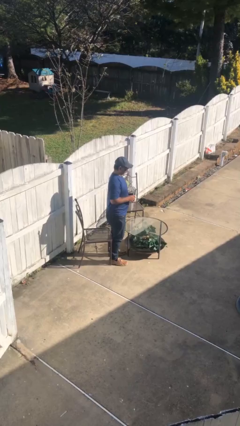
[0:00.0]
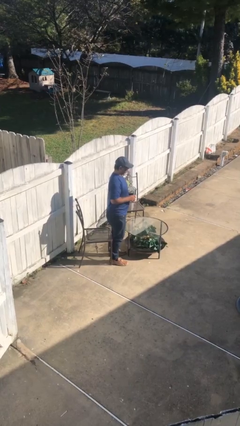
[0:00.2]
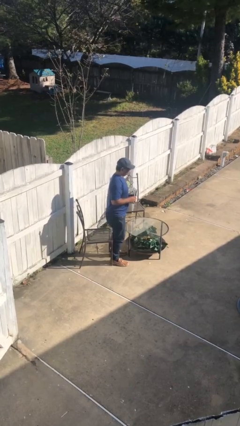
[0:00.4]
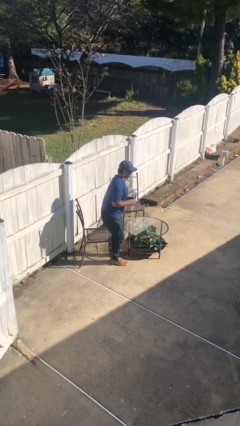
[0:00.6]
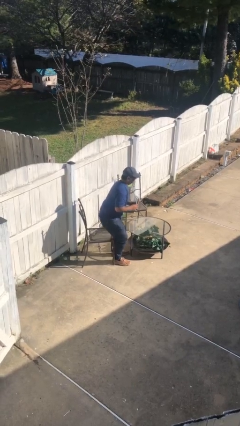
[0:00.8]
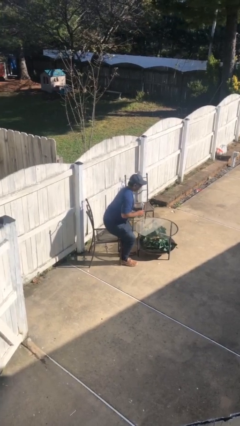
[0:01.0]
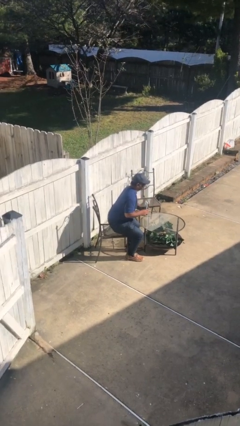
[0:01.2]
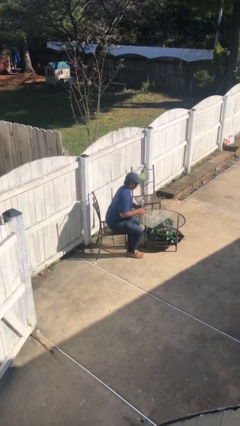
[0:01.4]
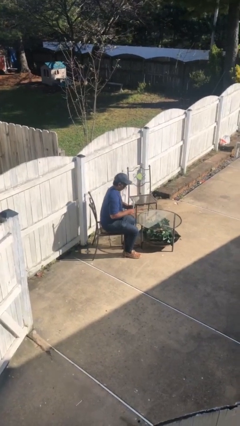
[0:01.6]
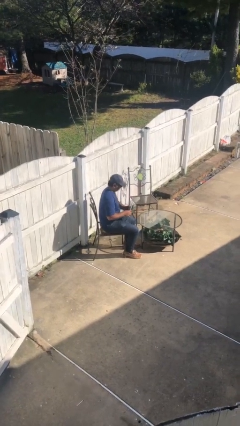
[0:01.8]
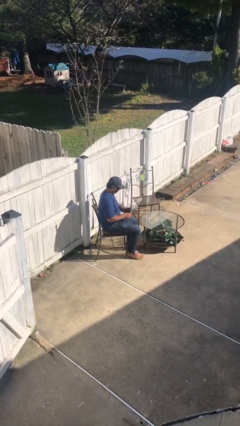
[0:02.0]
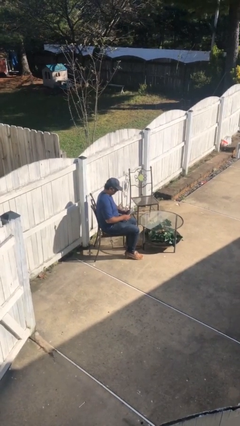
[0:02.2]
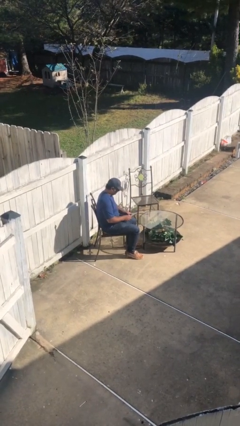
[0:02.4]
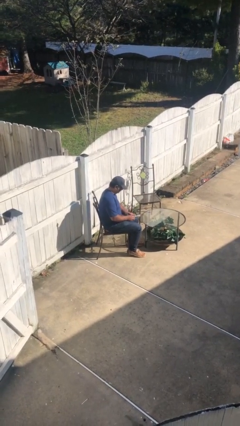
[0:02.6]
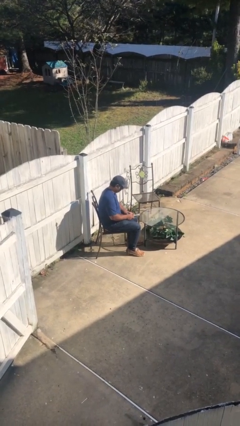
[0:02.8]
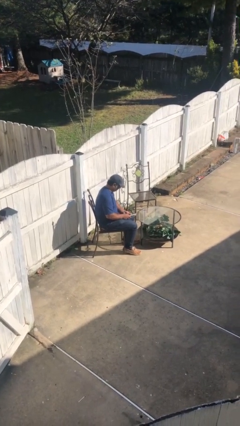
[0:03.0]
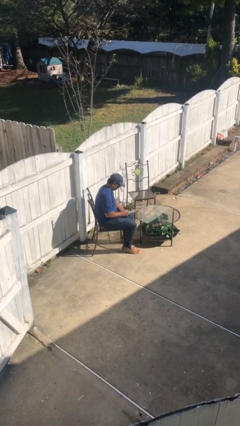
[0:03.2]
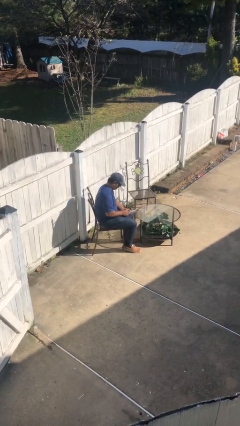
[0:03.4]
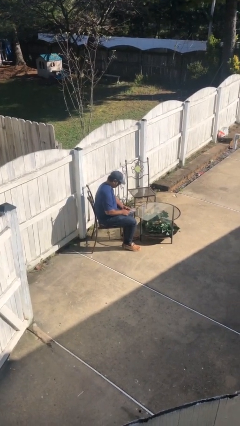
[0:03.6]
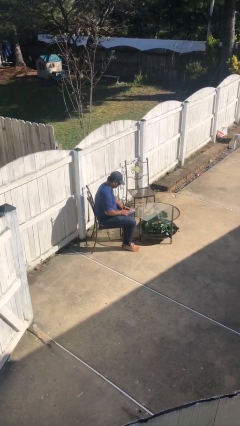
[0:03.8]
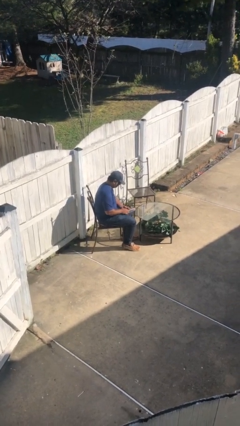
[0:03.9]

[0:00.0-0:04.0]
person sits down

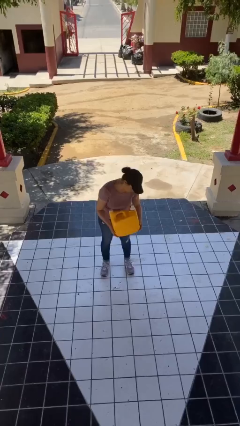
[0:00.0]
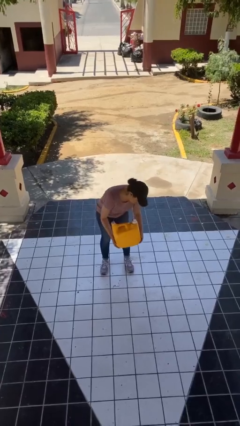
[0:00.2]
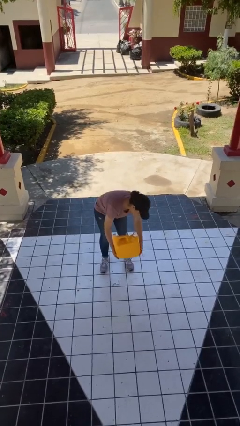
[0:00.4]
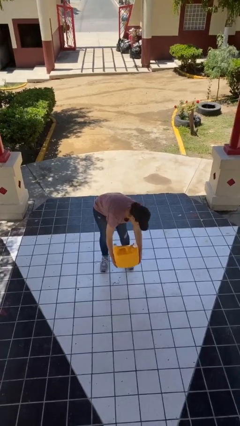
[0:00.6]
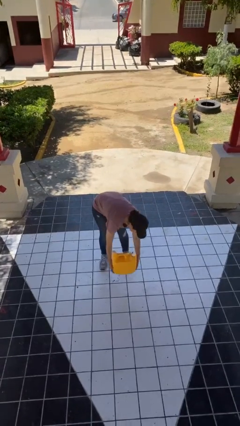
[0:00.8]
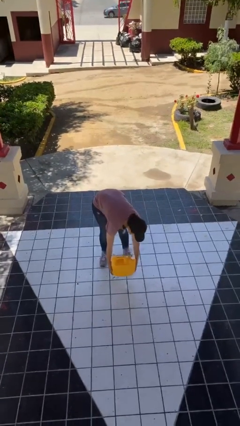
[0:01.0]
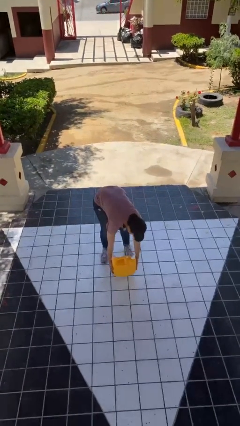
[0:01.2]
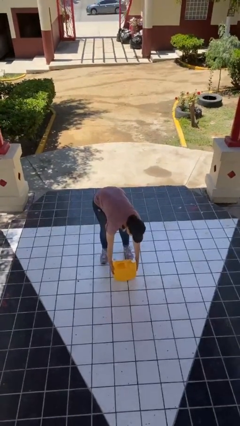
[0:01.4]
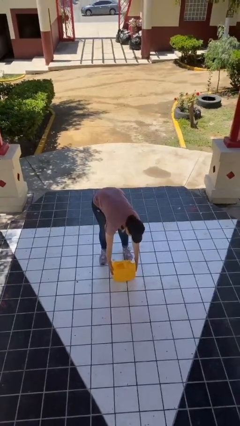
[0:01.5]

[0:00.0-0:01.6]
person puts down object on floor

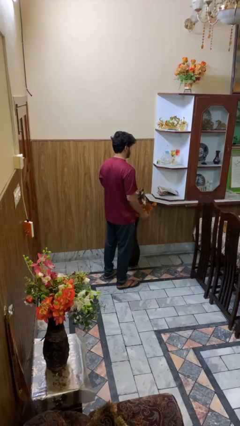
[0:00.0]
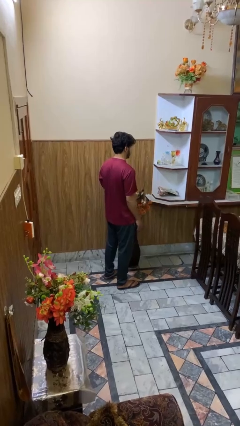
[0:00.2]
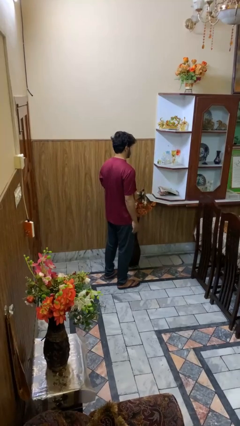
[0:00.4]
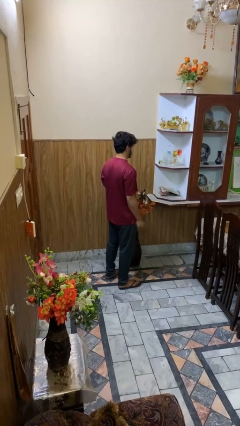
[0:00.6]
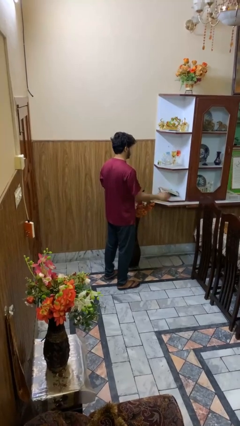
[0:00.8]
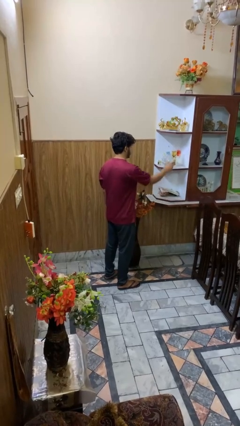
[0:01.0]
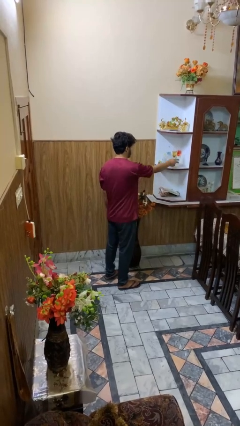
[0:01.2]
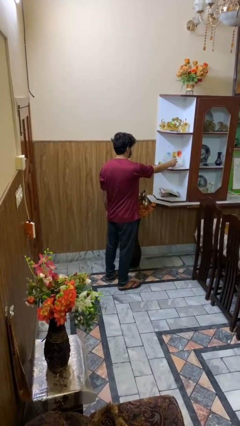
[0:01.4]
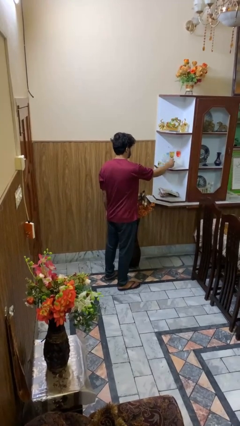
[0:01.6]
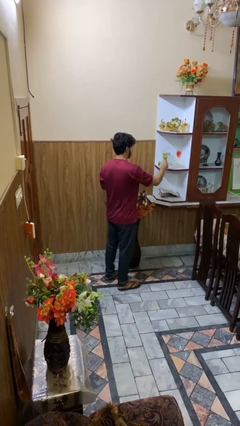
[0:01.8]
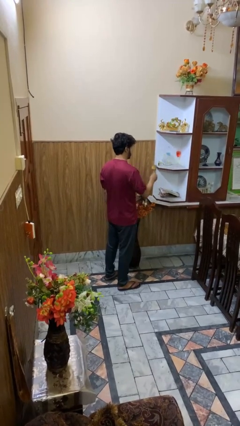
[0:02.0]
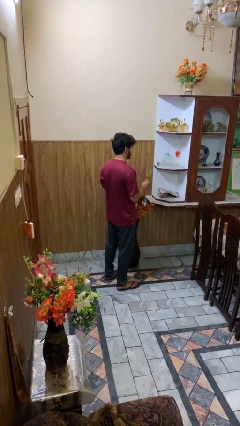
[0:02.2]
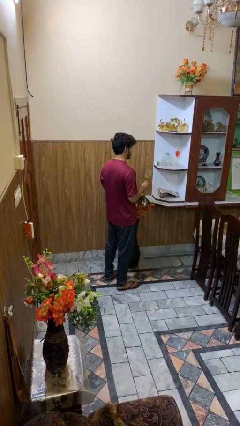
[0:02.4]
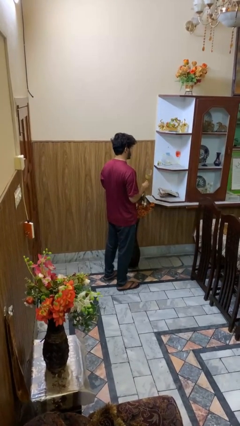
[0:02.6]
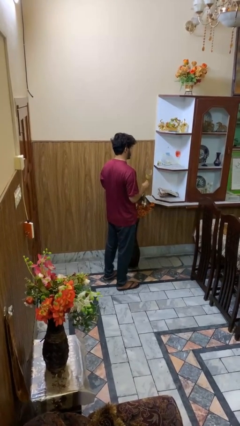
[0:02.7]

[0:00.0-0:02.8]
person picks up object from cabinet

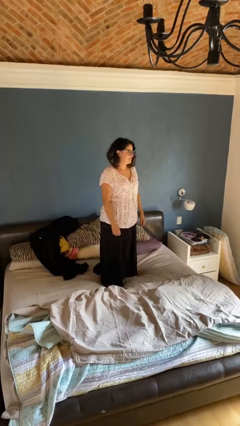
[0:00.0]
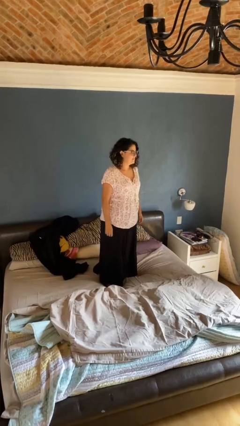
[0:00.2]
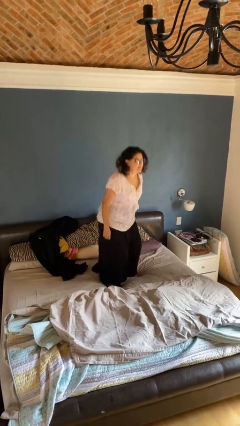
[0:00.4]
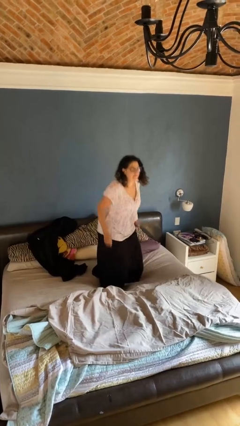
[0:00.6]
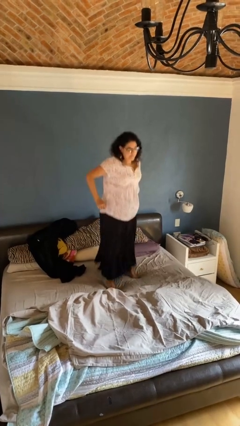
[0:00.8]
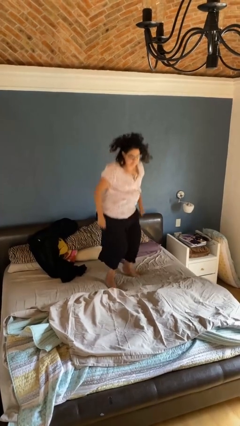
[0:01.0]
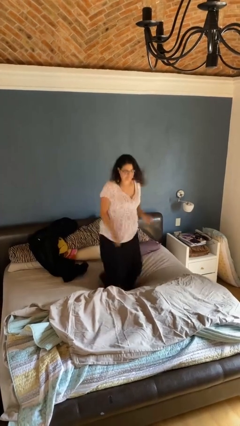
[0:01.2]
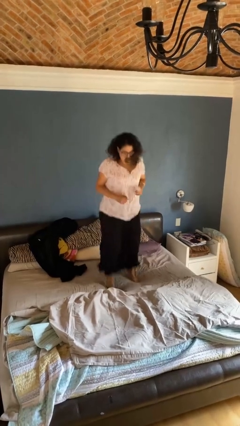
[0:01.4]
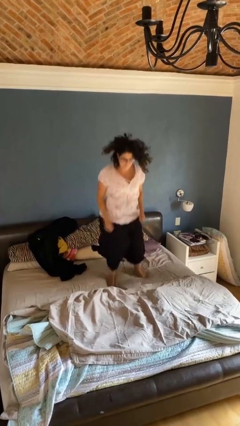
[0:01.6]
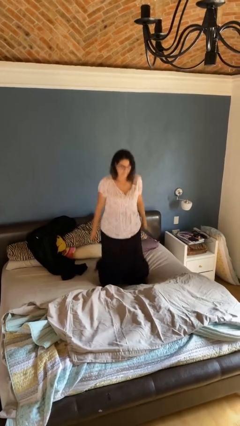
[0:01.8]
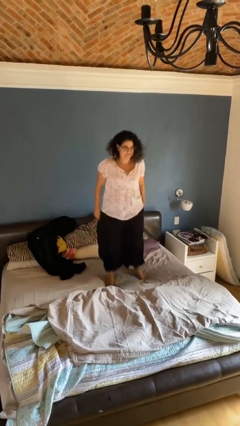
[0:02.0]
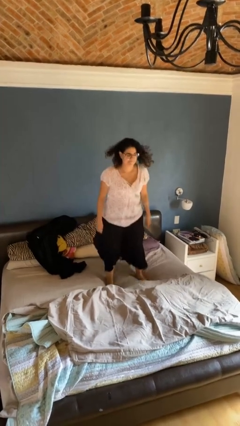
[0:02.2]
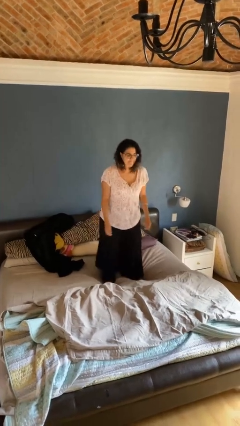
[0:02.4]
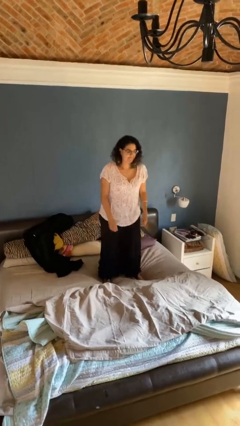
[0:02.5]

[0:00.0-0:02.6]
person jumps on bed

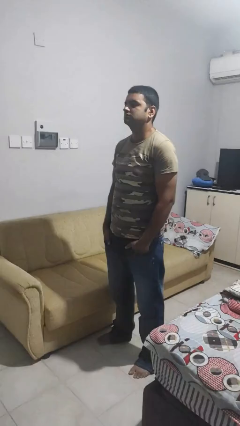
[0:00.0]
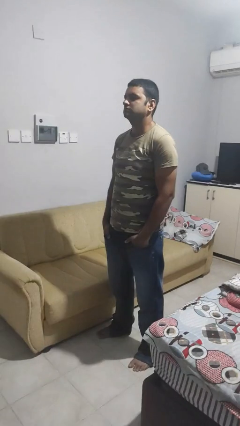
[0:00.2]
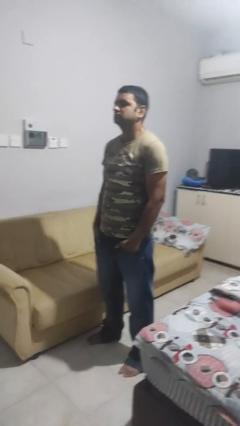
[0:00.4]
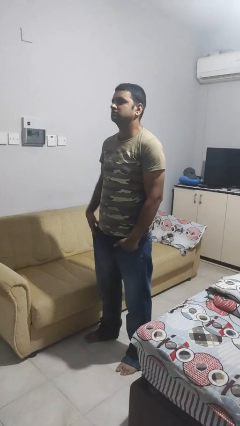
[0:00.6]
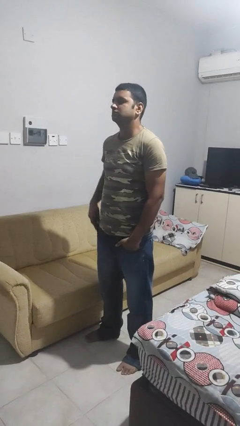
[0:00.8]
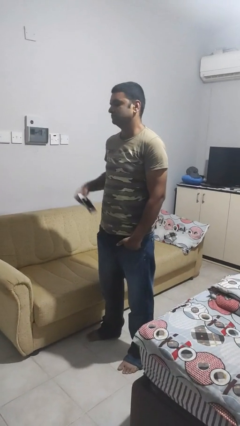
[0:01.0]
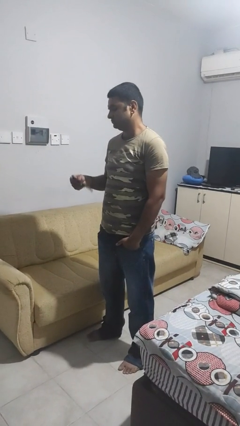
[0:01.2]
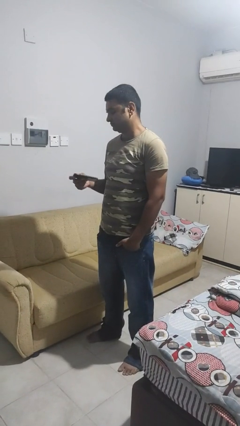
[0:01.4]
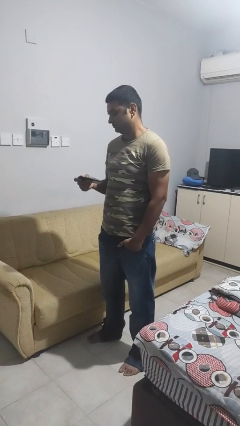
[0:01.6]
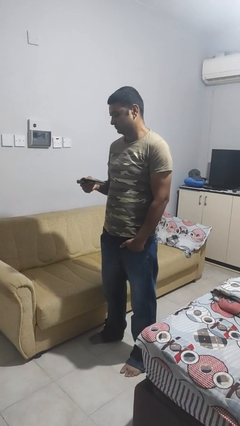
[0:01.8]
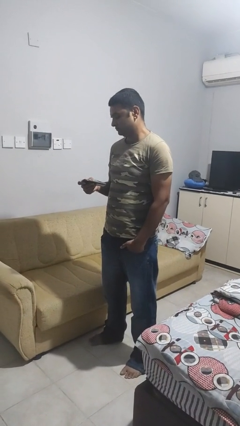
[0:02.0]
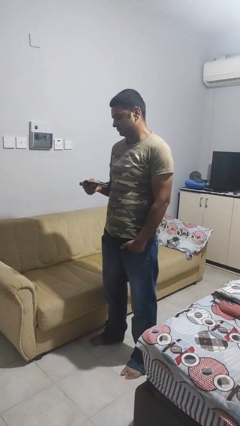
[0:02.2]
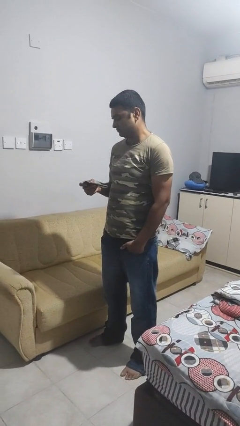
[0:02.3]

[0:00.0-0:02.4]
person takes phone from pocket

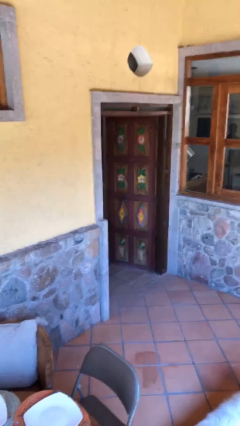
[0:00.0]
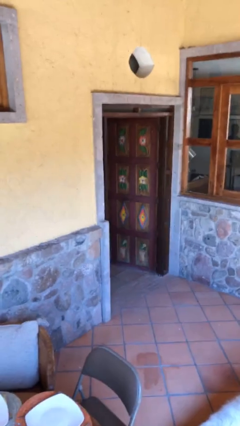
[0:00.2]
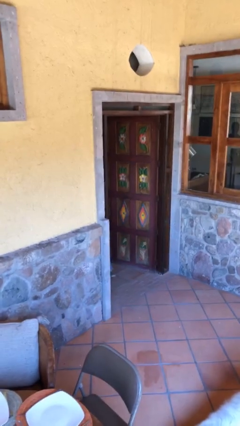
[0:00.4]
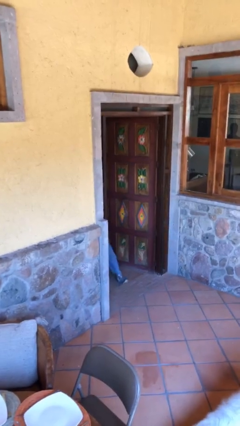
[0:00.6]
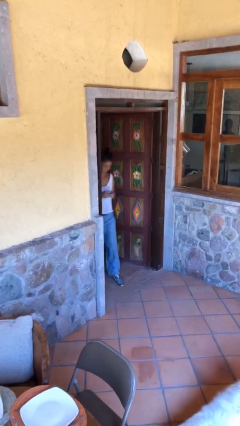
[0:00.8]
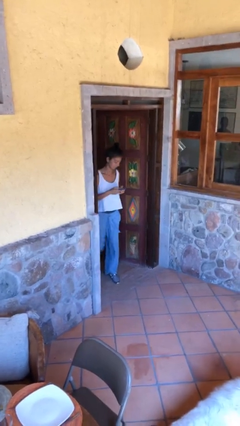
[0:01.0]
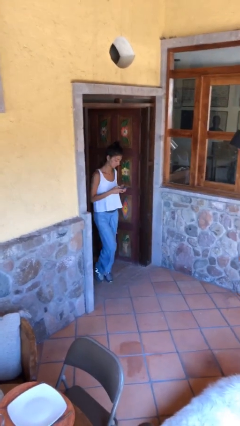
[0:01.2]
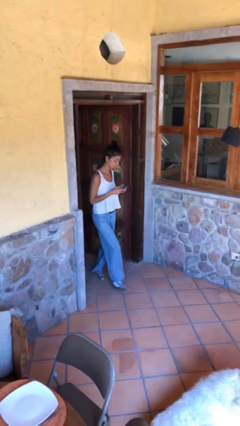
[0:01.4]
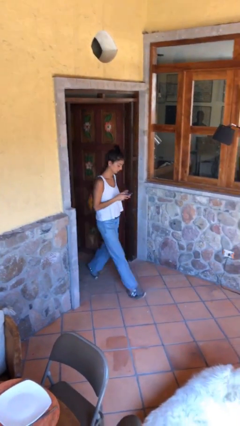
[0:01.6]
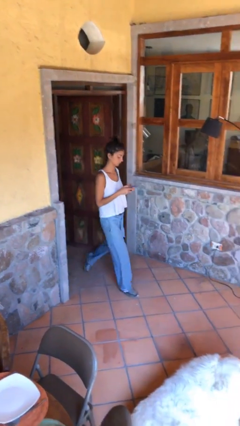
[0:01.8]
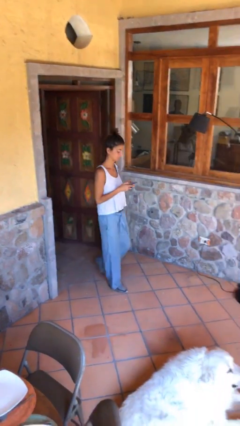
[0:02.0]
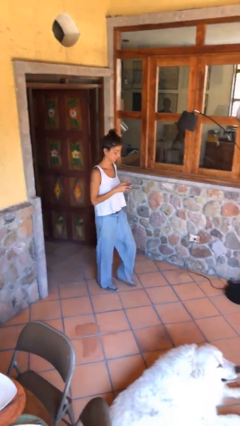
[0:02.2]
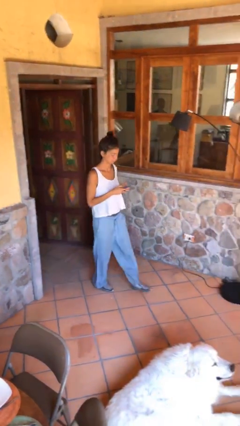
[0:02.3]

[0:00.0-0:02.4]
person enters scene through structure

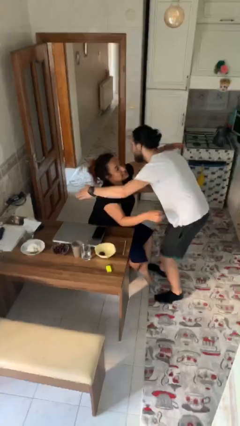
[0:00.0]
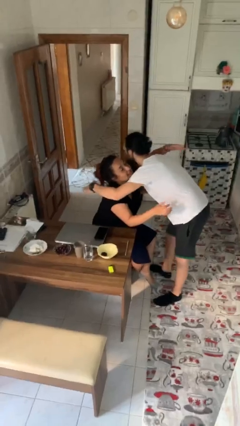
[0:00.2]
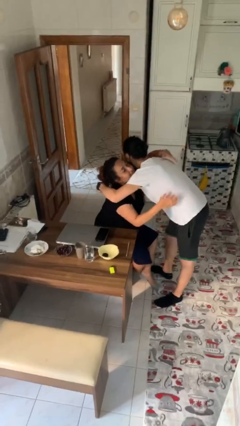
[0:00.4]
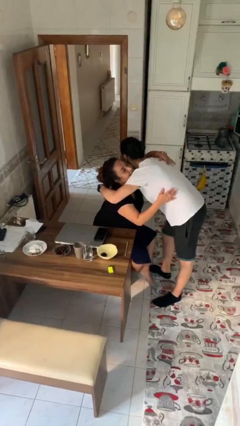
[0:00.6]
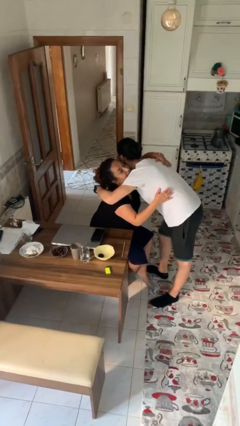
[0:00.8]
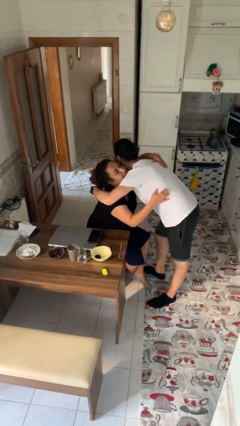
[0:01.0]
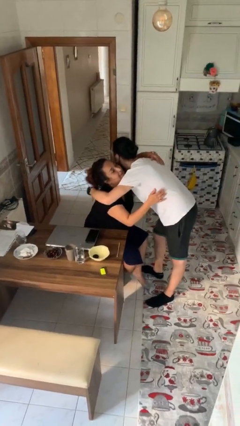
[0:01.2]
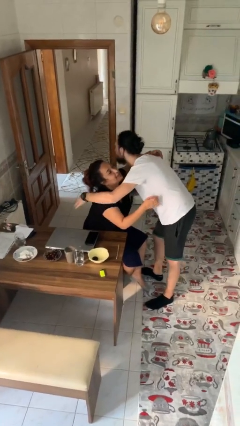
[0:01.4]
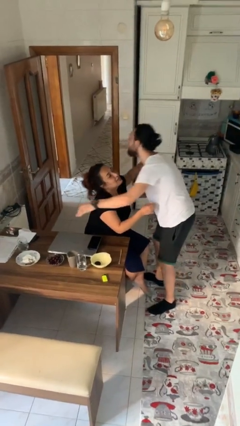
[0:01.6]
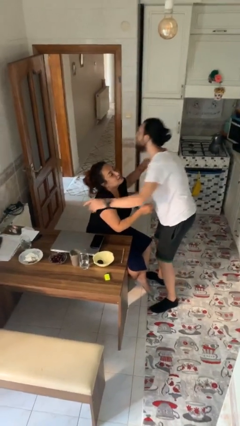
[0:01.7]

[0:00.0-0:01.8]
person embraces person
